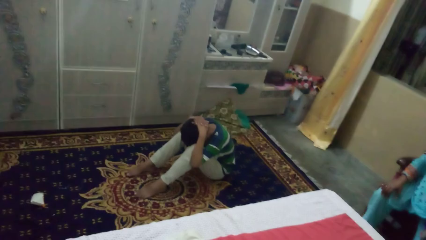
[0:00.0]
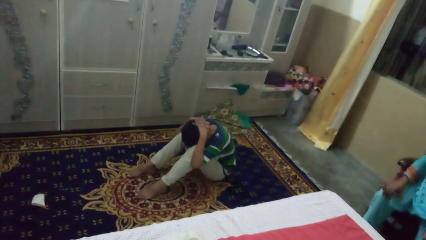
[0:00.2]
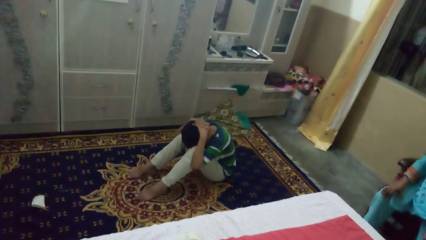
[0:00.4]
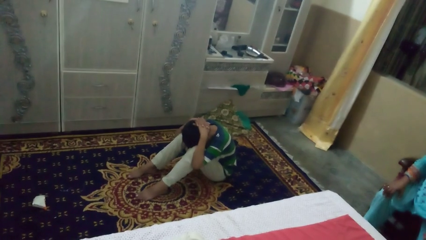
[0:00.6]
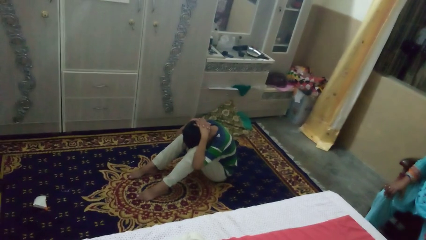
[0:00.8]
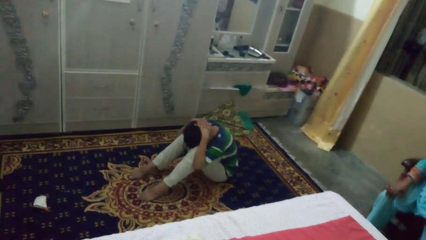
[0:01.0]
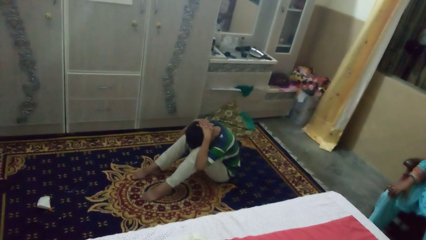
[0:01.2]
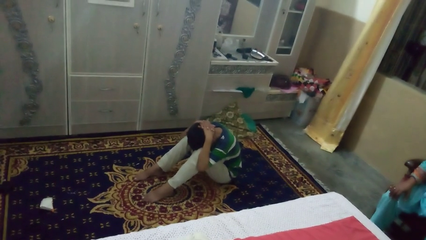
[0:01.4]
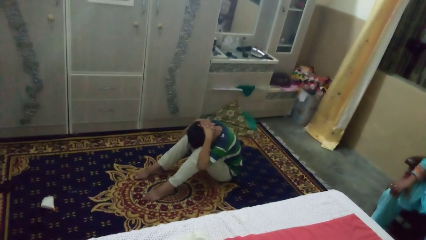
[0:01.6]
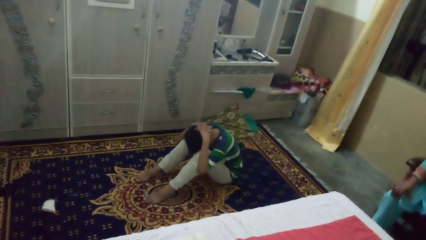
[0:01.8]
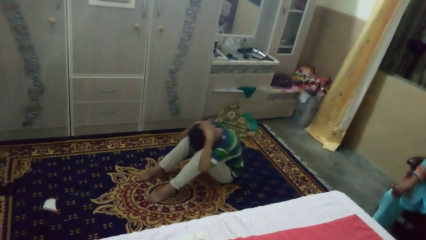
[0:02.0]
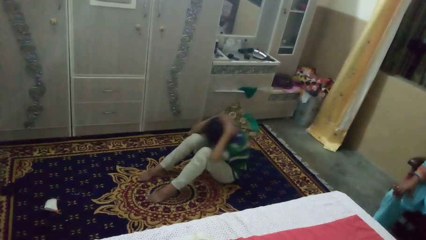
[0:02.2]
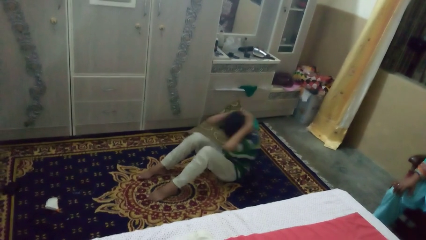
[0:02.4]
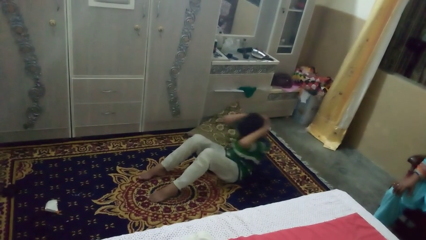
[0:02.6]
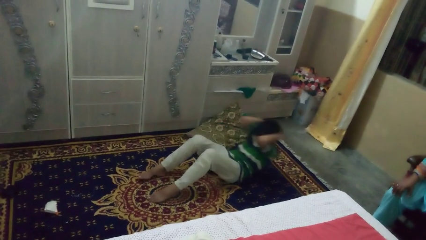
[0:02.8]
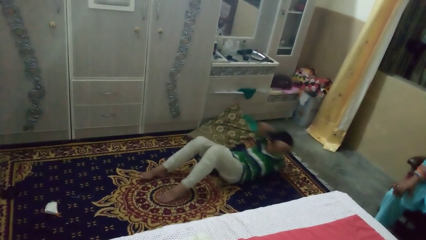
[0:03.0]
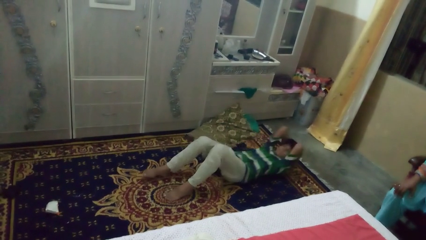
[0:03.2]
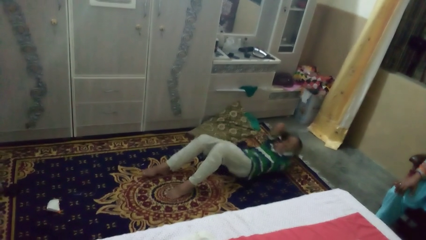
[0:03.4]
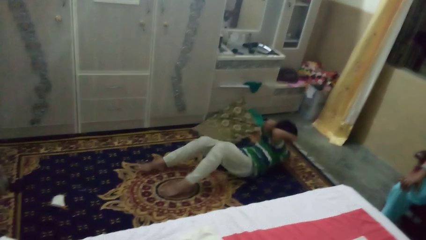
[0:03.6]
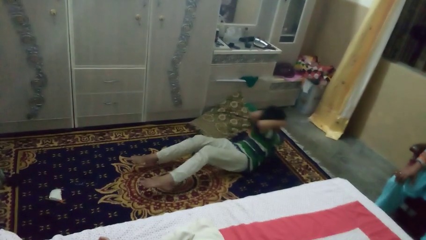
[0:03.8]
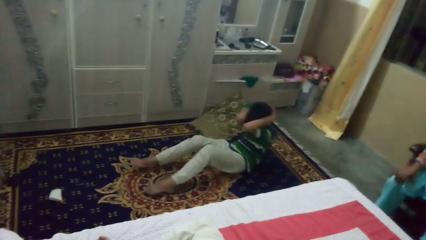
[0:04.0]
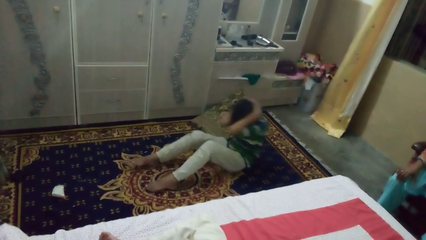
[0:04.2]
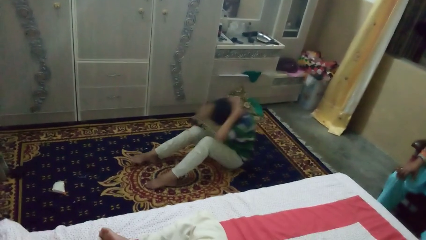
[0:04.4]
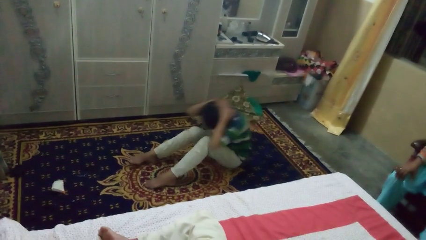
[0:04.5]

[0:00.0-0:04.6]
person exercises with situp

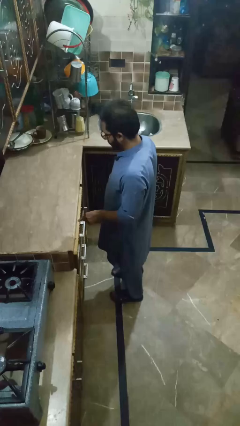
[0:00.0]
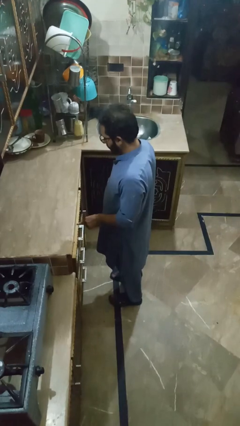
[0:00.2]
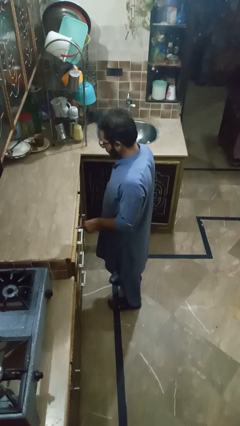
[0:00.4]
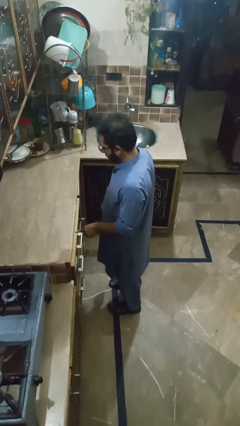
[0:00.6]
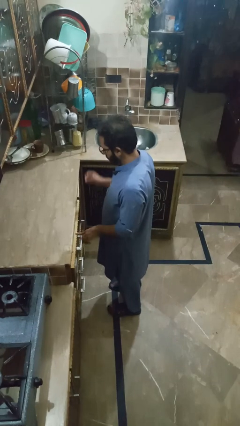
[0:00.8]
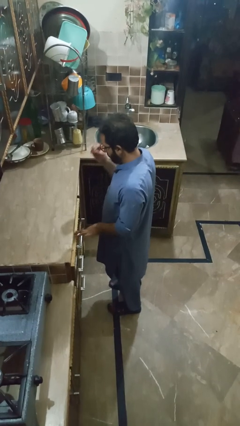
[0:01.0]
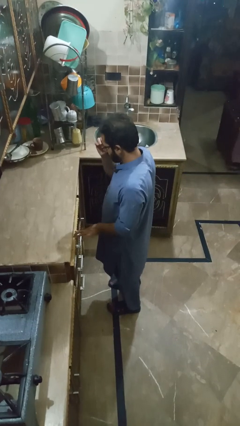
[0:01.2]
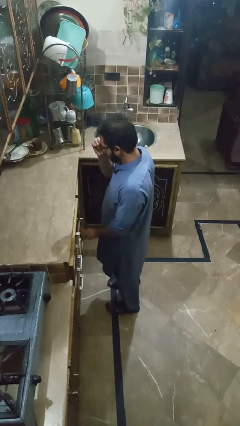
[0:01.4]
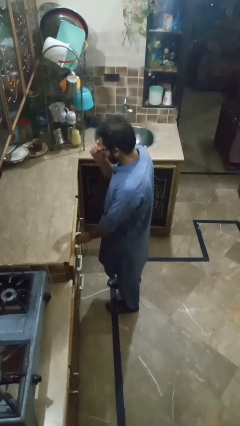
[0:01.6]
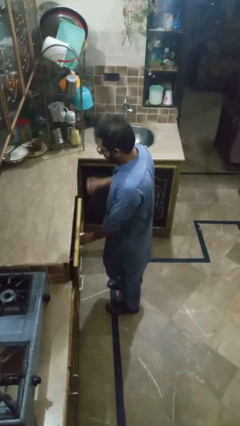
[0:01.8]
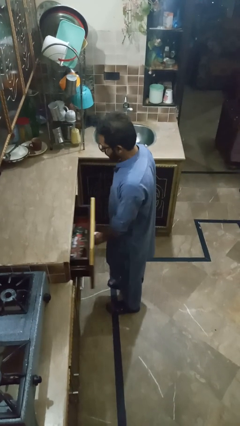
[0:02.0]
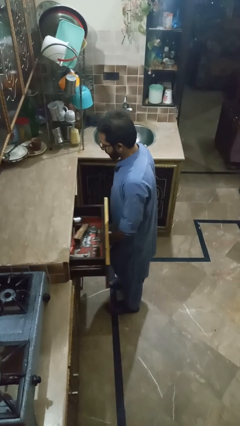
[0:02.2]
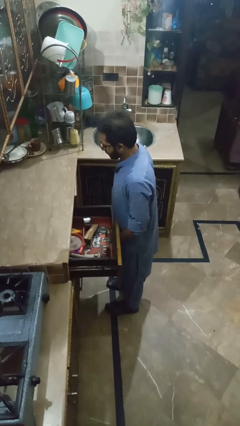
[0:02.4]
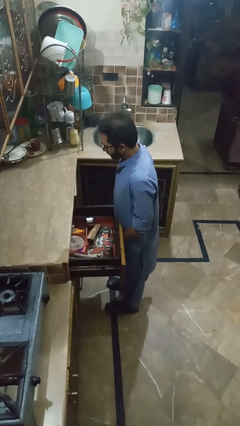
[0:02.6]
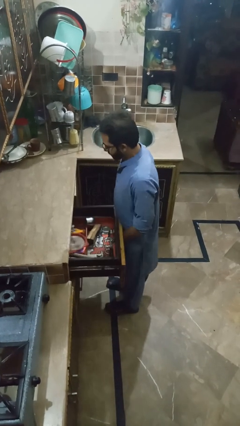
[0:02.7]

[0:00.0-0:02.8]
person opens kitchen drawer

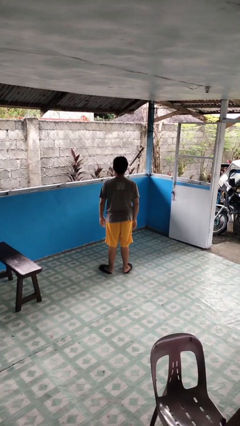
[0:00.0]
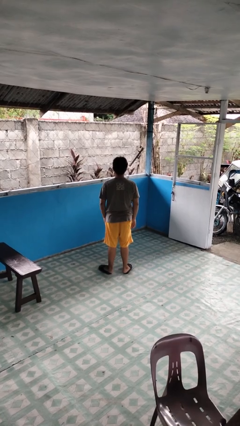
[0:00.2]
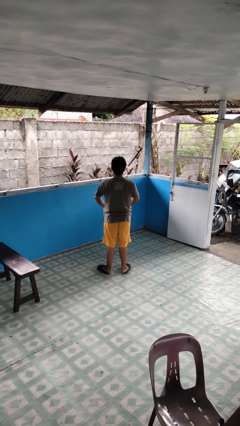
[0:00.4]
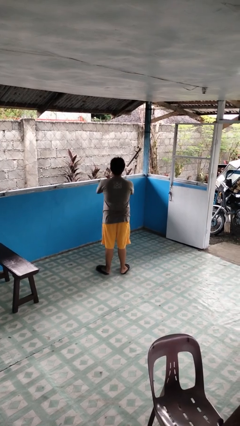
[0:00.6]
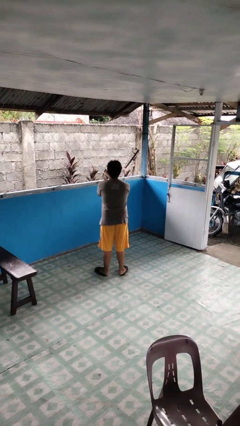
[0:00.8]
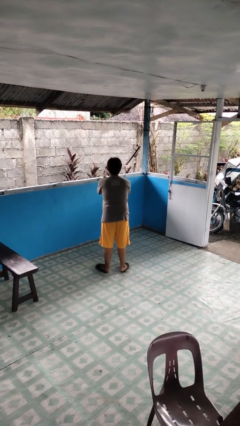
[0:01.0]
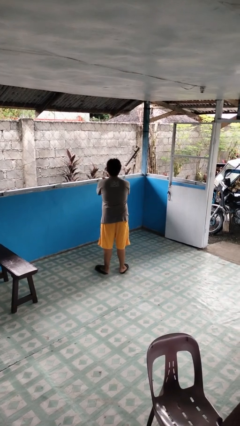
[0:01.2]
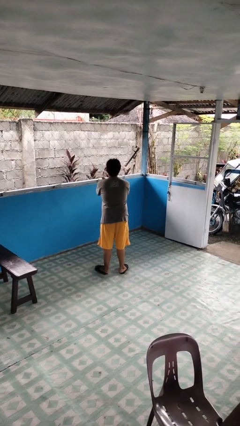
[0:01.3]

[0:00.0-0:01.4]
person gestures arms x

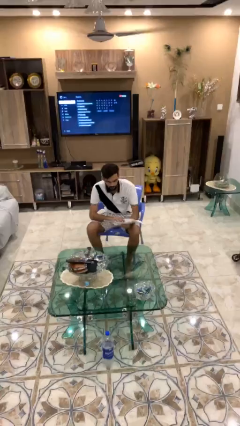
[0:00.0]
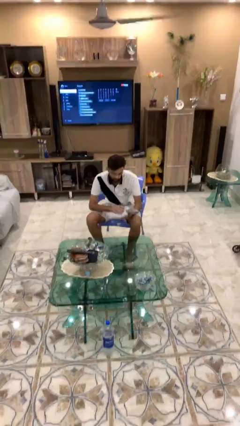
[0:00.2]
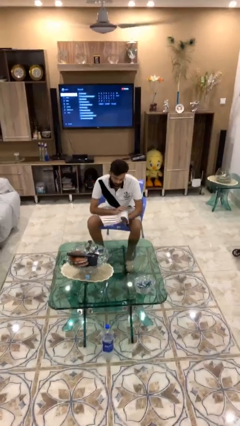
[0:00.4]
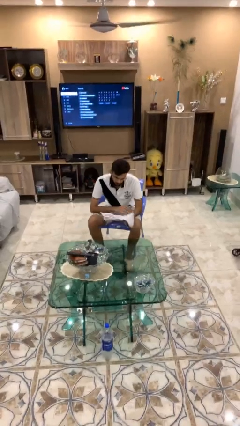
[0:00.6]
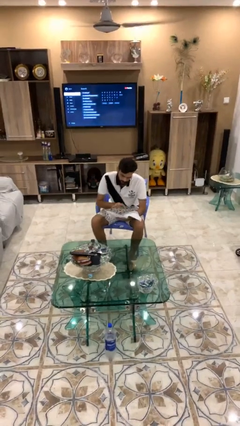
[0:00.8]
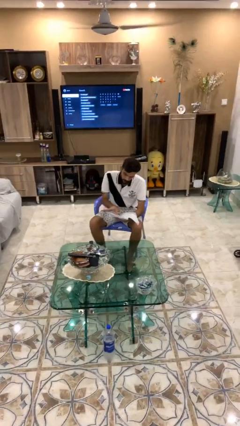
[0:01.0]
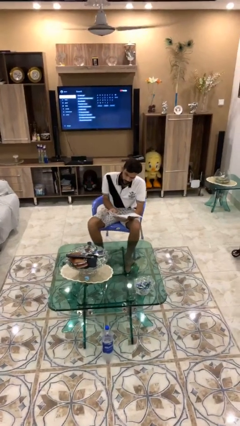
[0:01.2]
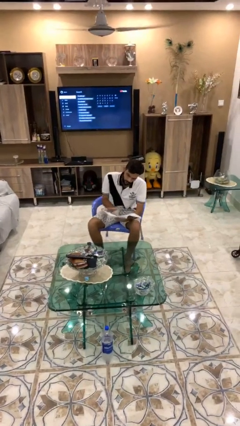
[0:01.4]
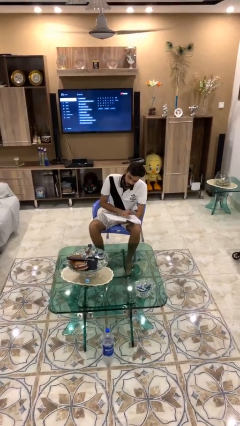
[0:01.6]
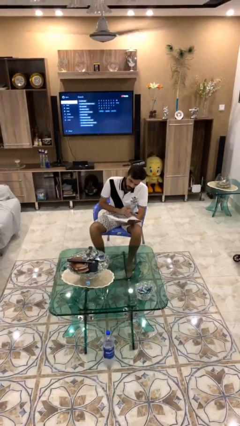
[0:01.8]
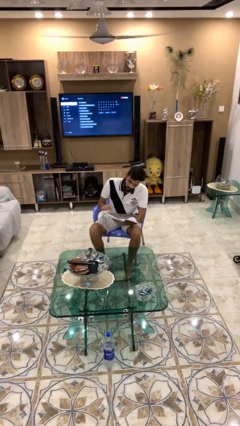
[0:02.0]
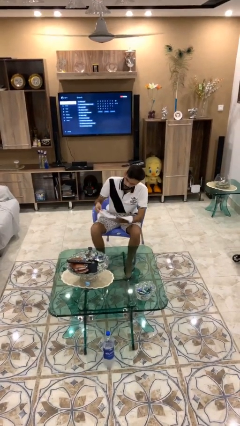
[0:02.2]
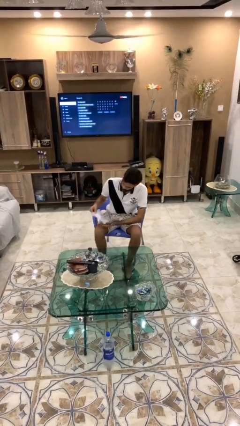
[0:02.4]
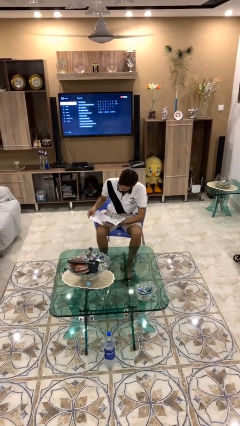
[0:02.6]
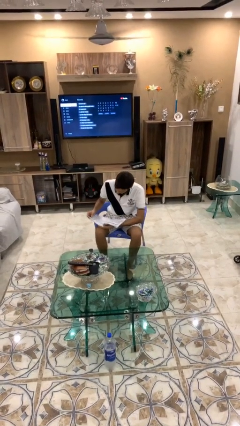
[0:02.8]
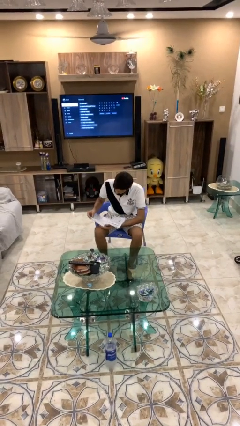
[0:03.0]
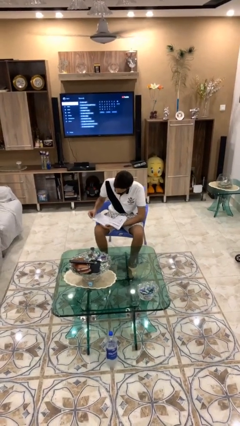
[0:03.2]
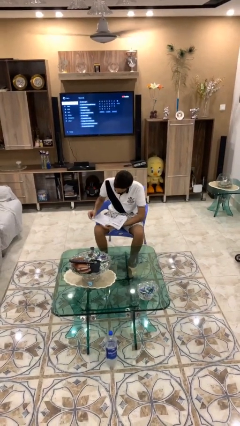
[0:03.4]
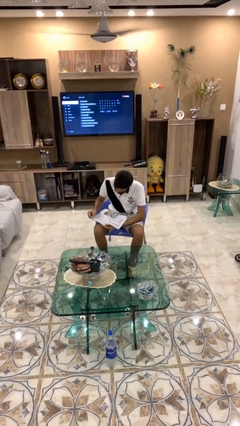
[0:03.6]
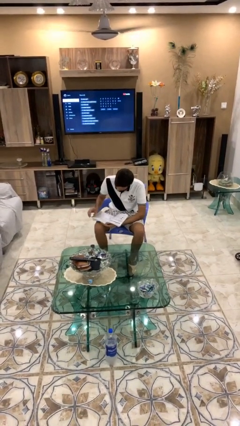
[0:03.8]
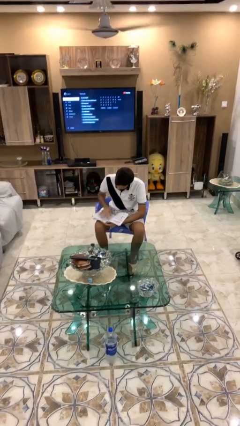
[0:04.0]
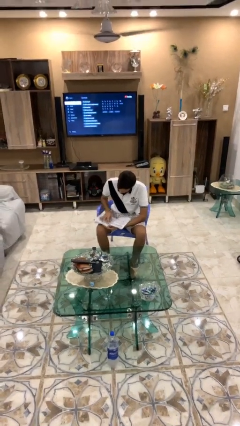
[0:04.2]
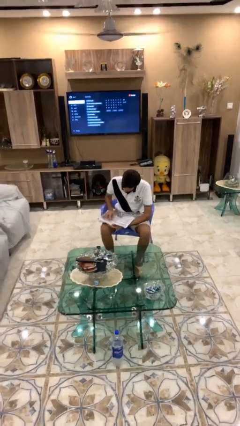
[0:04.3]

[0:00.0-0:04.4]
person reads document

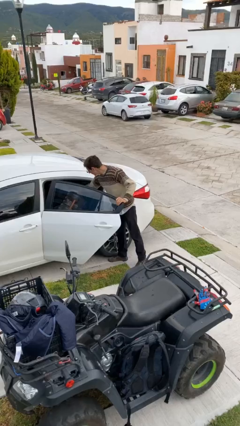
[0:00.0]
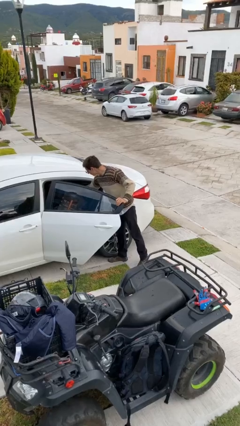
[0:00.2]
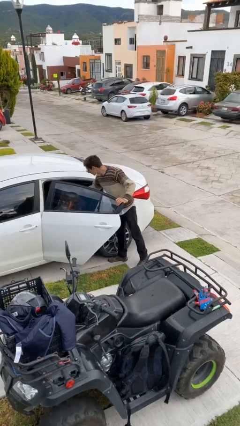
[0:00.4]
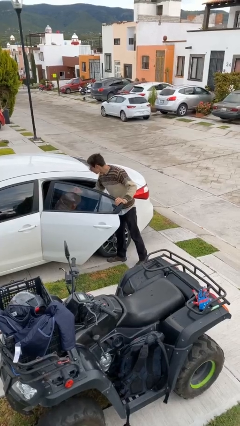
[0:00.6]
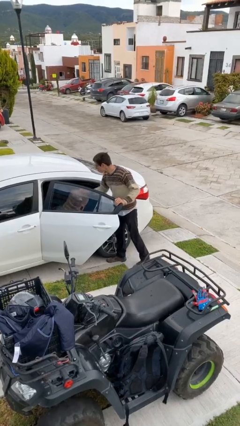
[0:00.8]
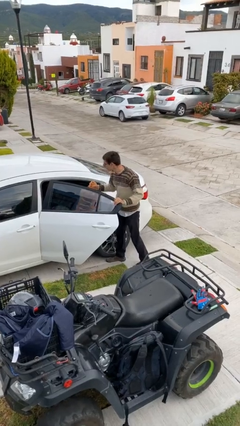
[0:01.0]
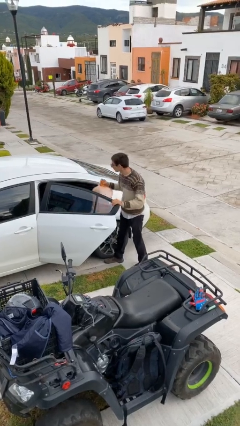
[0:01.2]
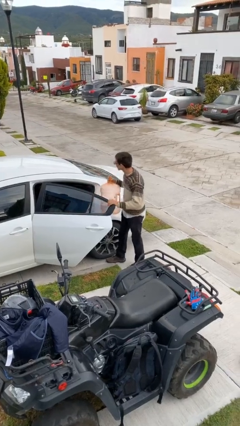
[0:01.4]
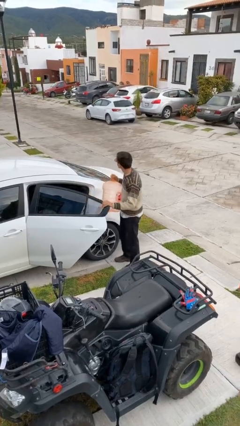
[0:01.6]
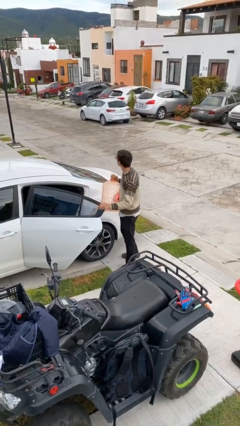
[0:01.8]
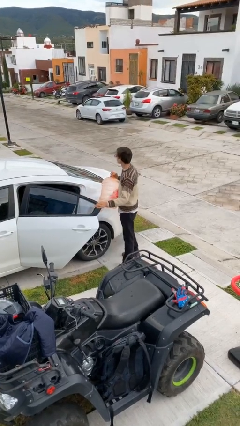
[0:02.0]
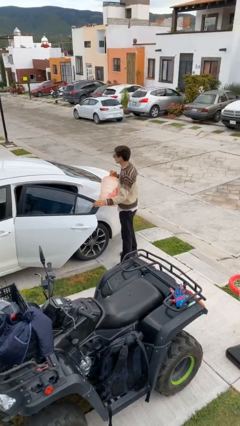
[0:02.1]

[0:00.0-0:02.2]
person unloads car

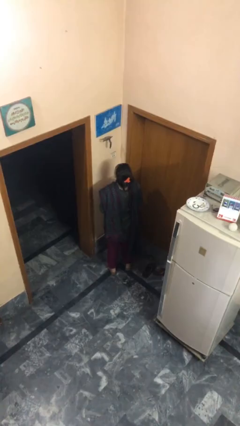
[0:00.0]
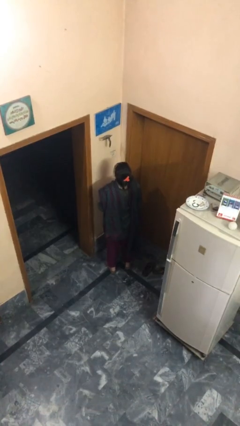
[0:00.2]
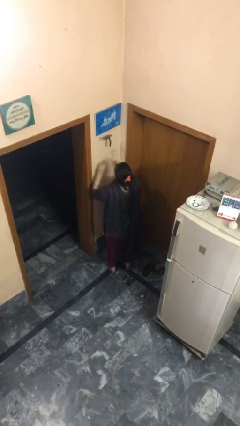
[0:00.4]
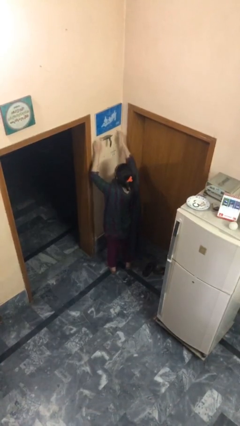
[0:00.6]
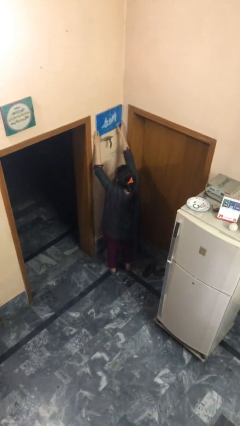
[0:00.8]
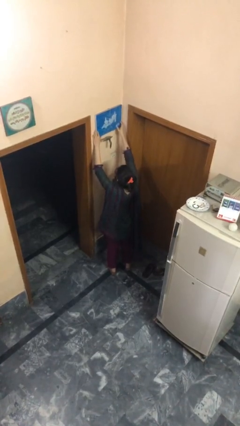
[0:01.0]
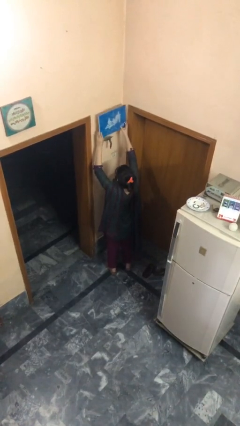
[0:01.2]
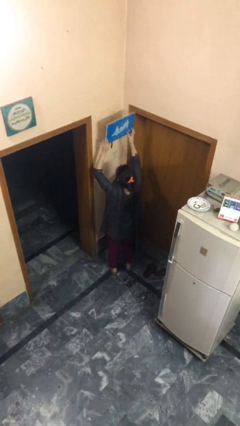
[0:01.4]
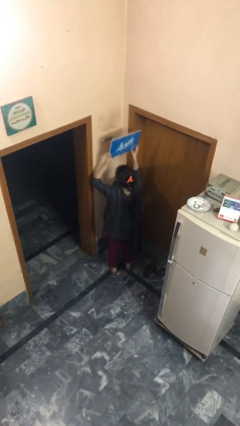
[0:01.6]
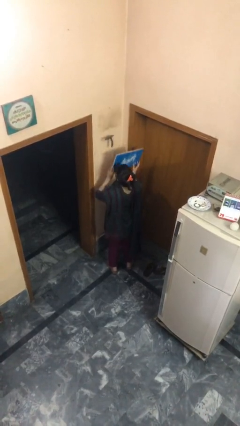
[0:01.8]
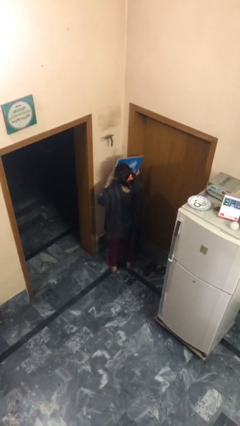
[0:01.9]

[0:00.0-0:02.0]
person takes down picture frame

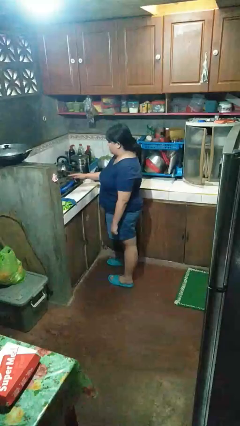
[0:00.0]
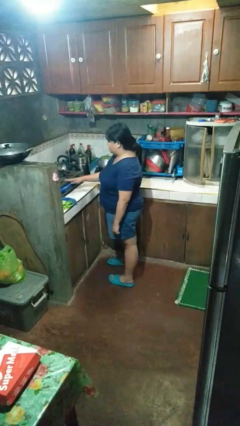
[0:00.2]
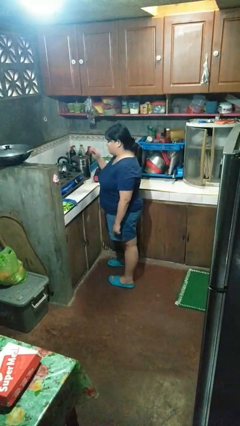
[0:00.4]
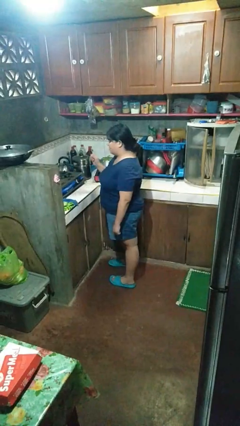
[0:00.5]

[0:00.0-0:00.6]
person burns hand
